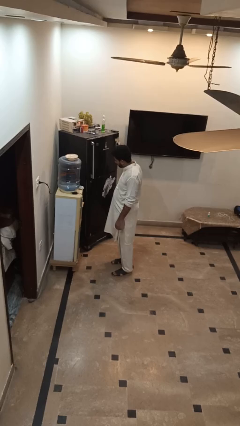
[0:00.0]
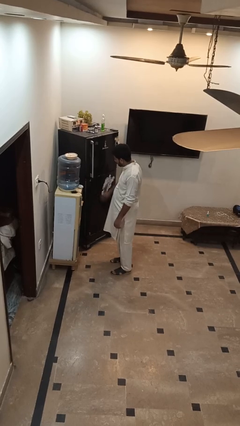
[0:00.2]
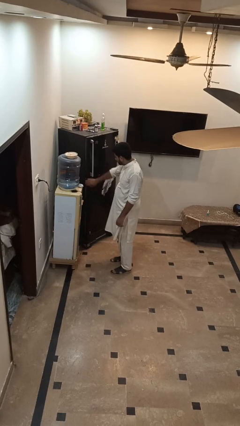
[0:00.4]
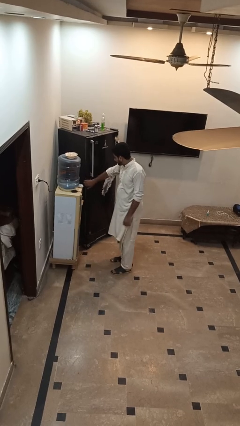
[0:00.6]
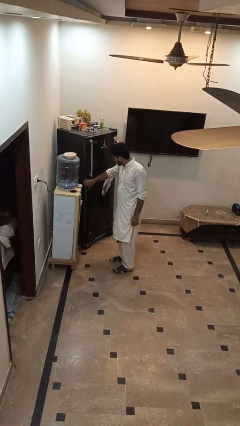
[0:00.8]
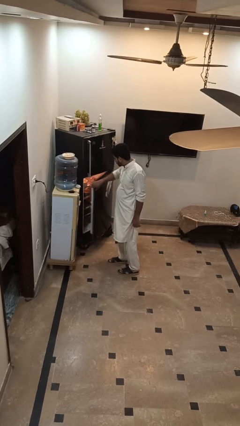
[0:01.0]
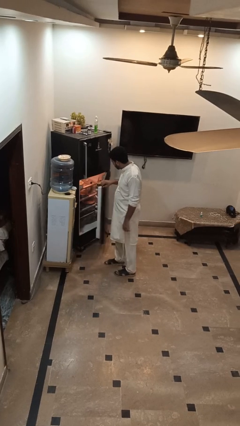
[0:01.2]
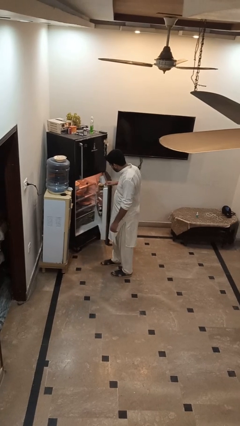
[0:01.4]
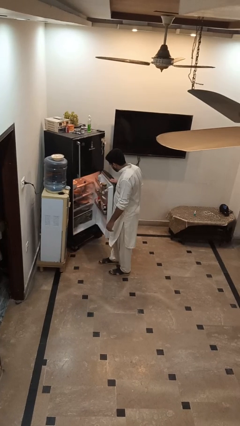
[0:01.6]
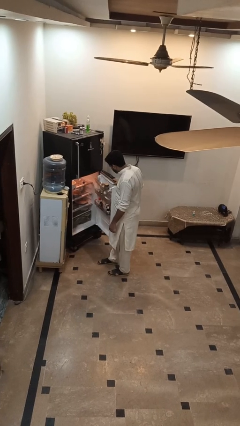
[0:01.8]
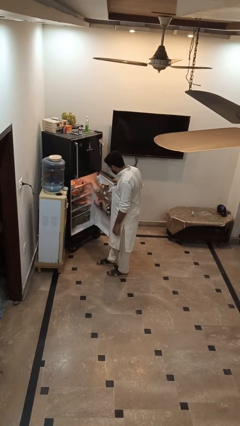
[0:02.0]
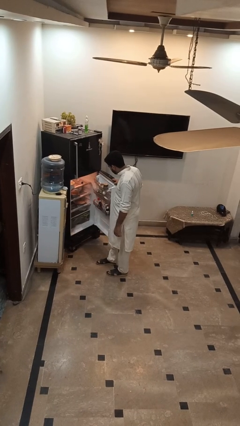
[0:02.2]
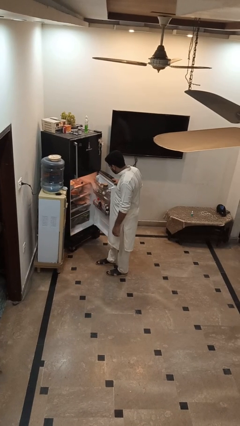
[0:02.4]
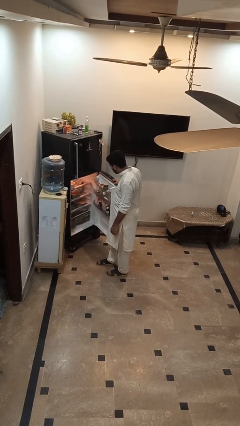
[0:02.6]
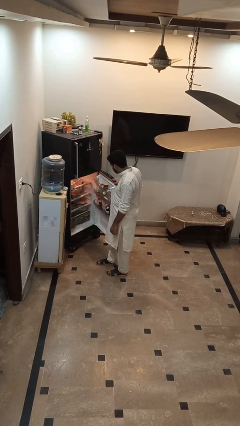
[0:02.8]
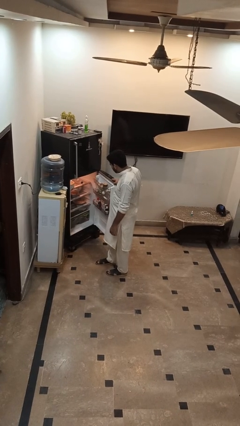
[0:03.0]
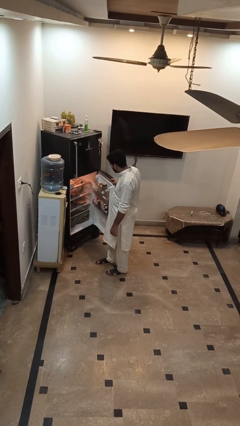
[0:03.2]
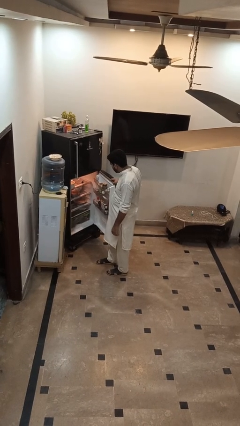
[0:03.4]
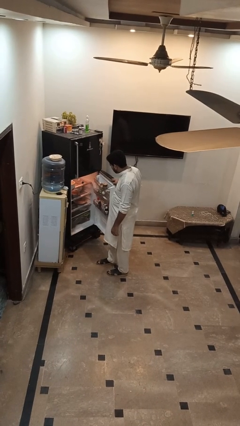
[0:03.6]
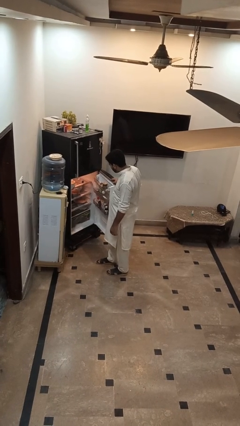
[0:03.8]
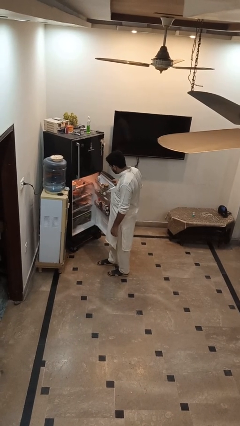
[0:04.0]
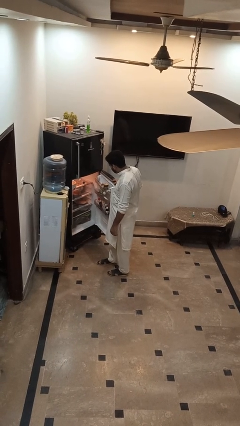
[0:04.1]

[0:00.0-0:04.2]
person opens refrigerator

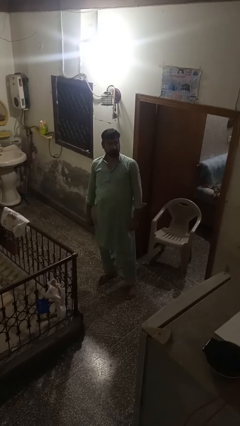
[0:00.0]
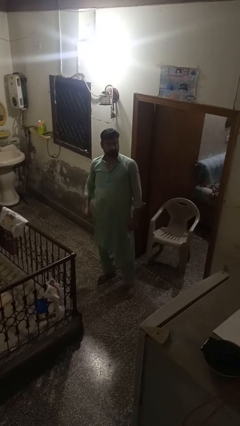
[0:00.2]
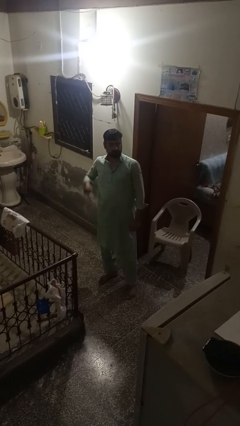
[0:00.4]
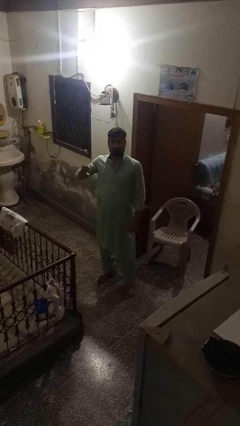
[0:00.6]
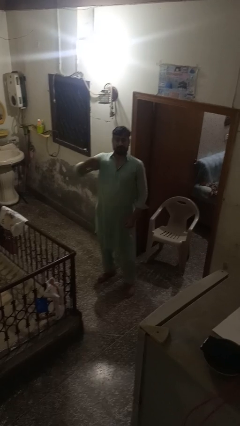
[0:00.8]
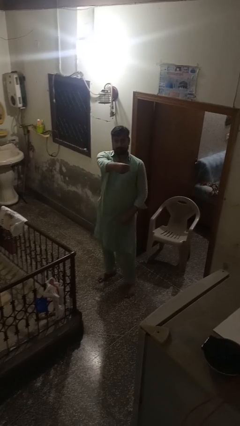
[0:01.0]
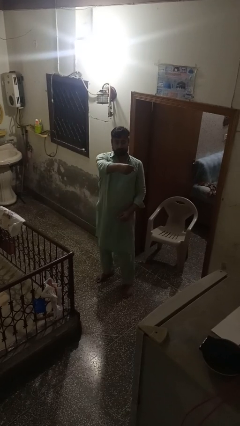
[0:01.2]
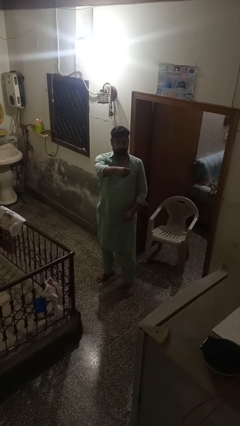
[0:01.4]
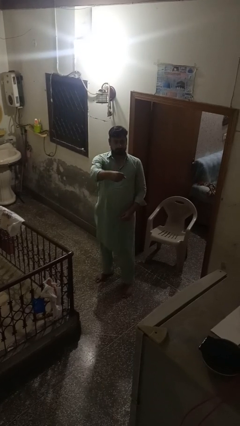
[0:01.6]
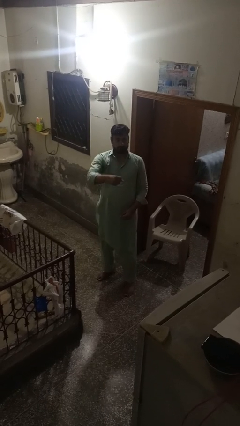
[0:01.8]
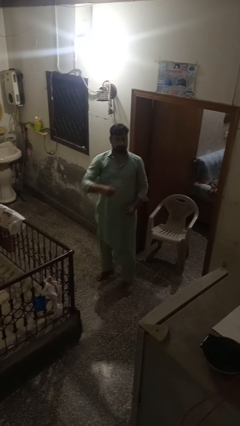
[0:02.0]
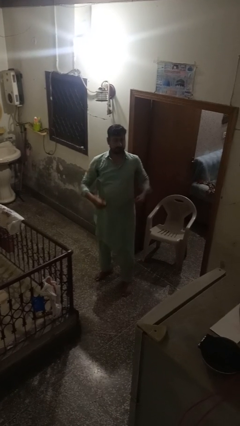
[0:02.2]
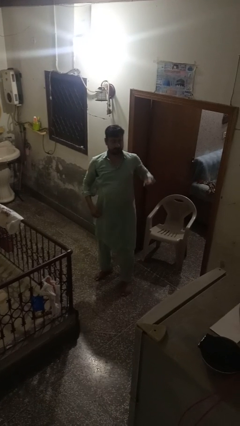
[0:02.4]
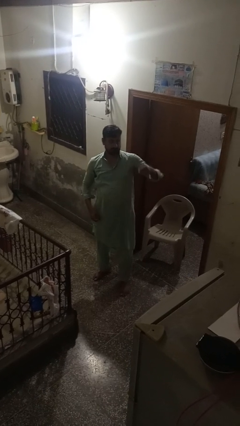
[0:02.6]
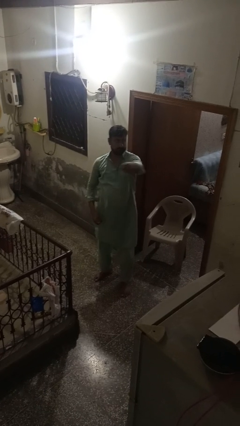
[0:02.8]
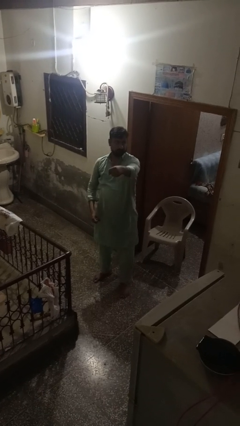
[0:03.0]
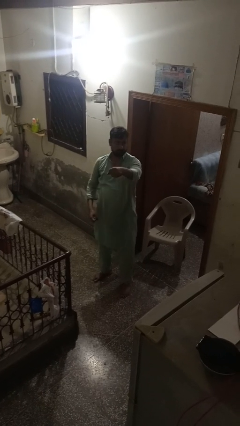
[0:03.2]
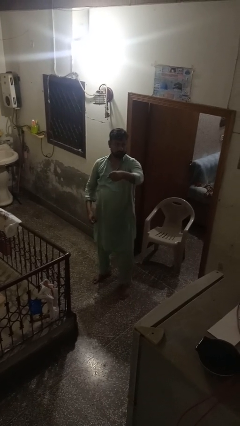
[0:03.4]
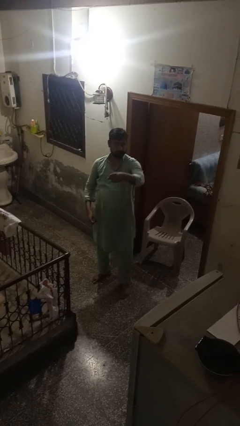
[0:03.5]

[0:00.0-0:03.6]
person punches

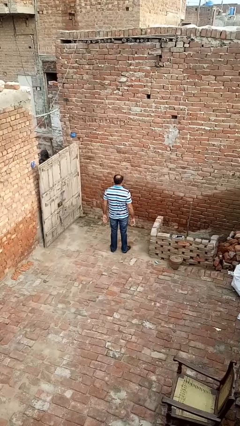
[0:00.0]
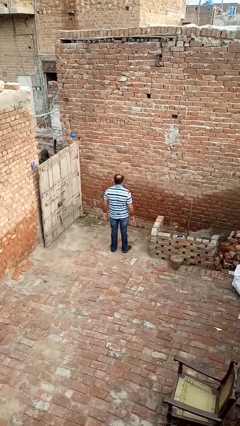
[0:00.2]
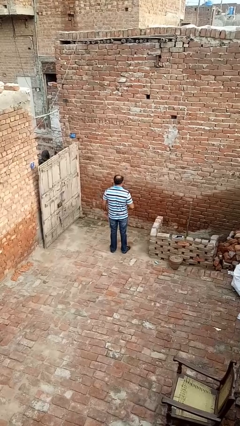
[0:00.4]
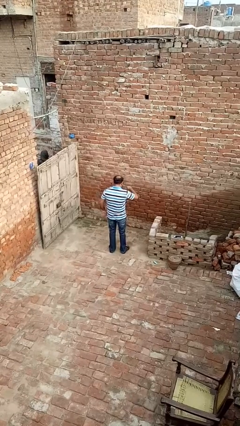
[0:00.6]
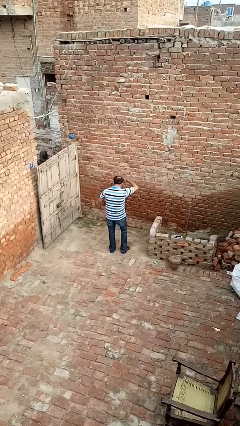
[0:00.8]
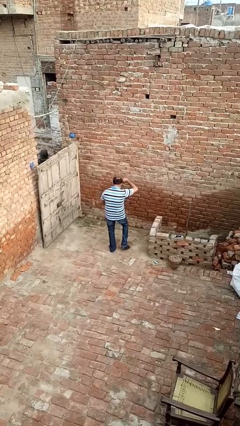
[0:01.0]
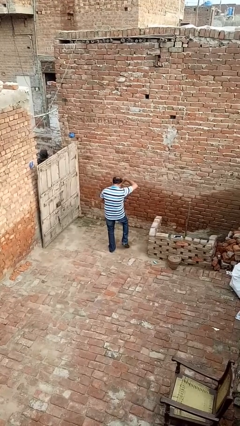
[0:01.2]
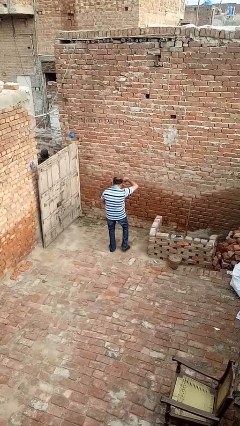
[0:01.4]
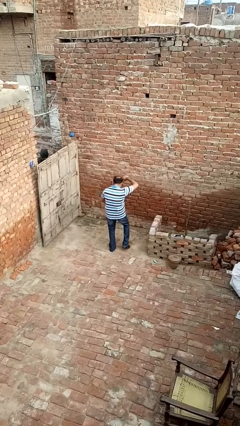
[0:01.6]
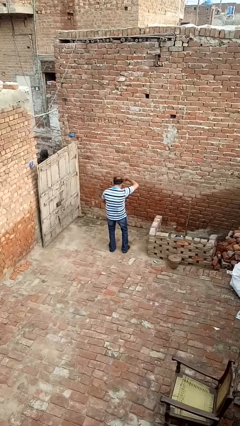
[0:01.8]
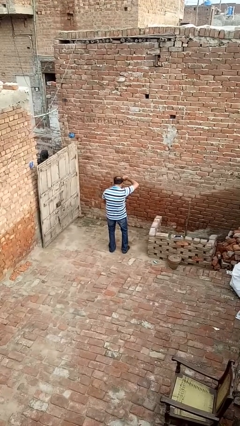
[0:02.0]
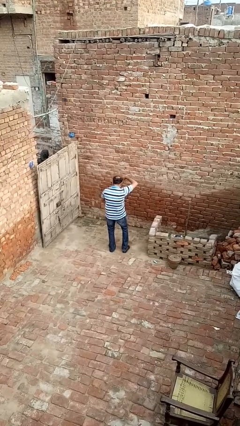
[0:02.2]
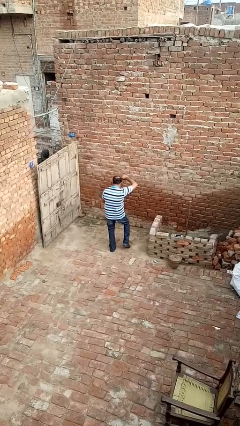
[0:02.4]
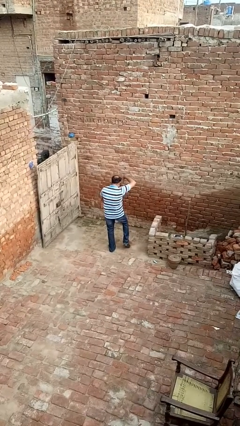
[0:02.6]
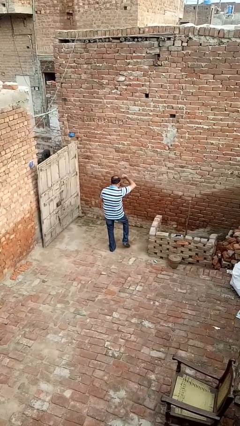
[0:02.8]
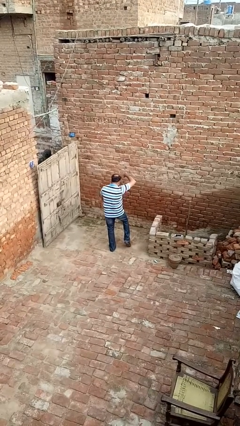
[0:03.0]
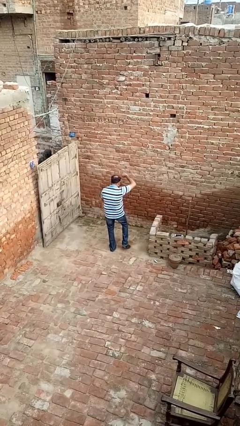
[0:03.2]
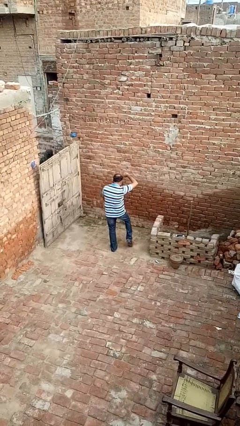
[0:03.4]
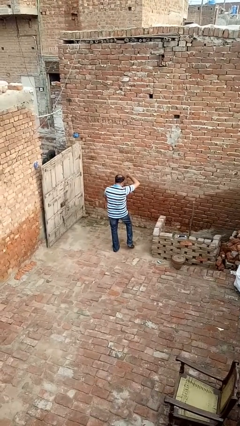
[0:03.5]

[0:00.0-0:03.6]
person dances in place

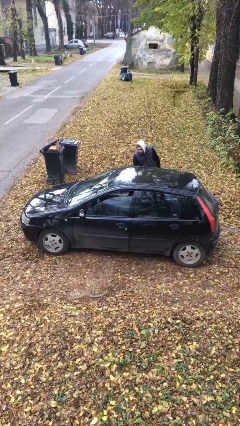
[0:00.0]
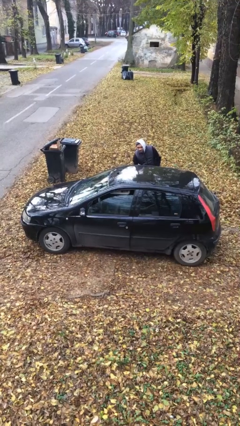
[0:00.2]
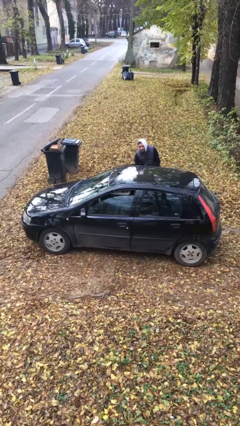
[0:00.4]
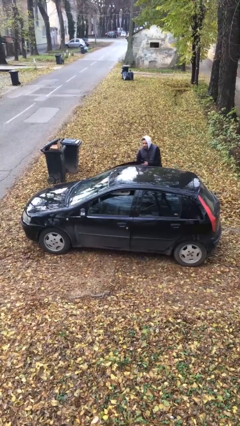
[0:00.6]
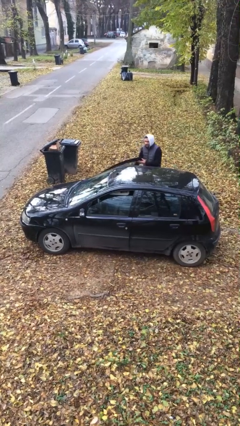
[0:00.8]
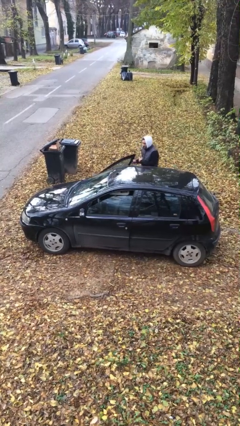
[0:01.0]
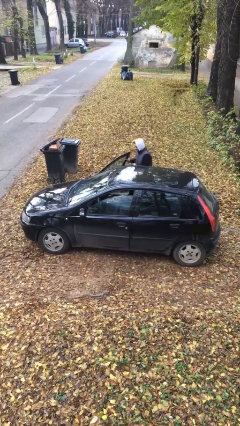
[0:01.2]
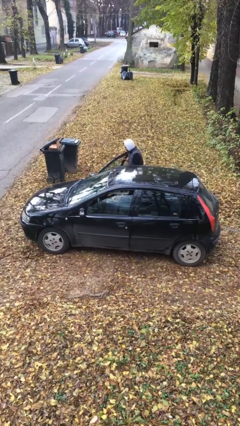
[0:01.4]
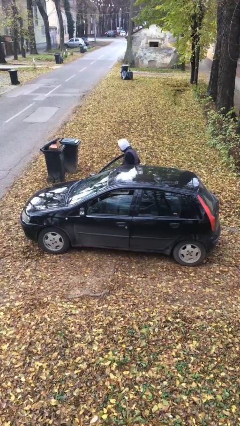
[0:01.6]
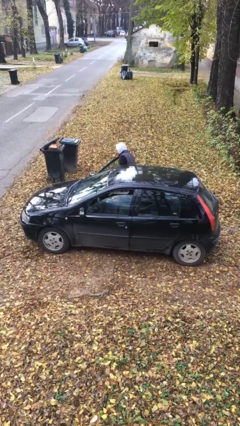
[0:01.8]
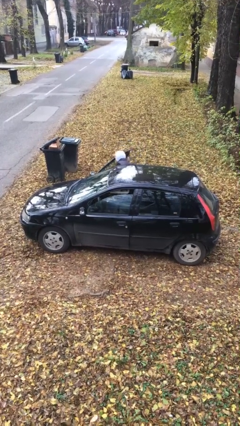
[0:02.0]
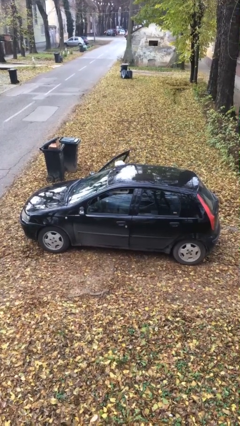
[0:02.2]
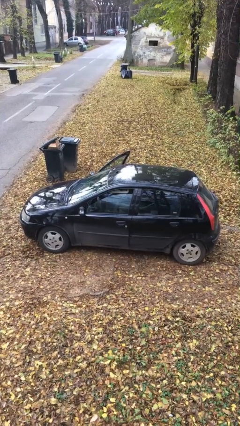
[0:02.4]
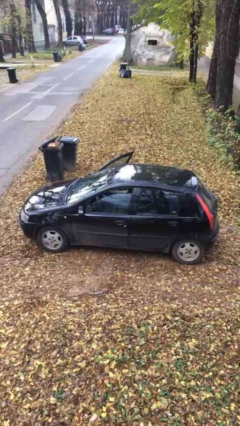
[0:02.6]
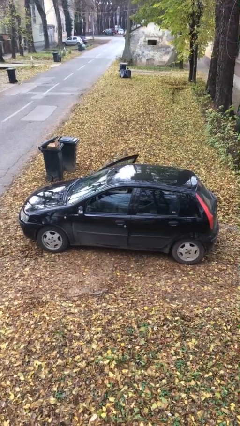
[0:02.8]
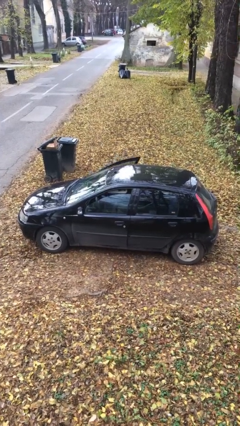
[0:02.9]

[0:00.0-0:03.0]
car picks up person

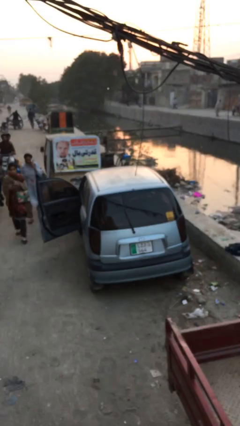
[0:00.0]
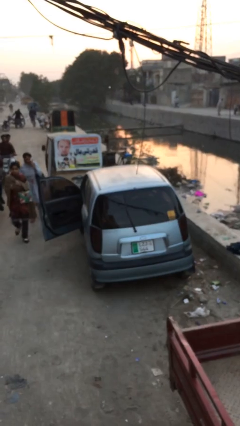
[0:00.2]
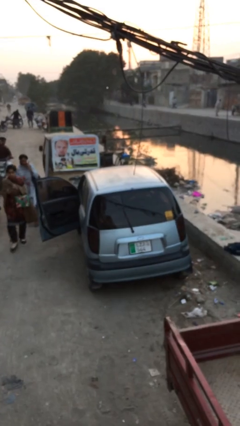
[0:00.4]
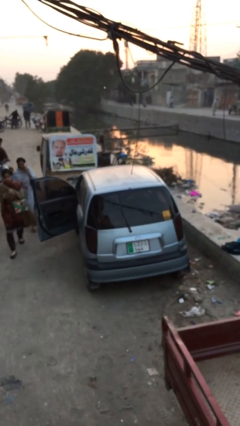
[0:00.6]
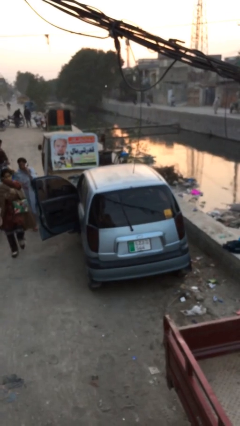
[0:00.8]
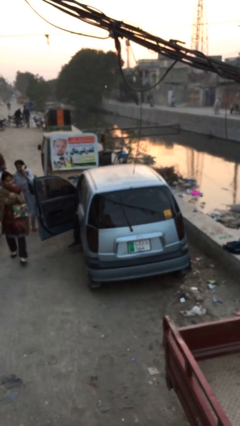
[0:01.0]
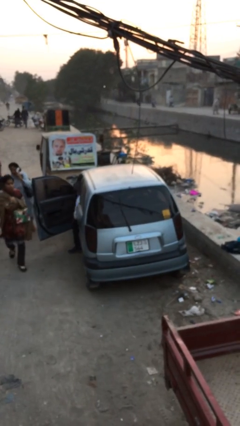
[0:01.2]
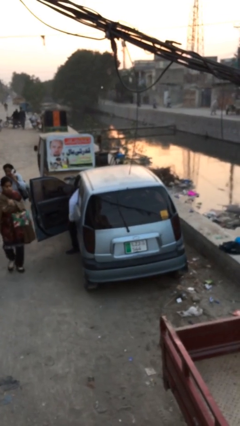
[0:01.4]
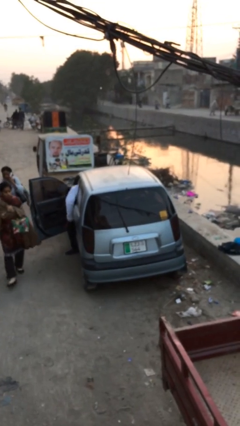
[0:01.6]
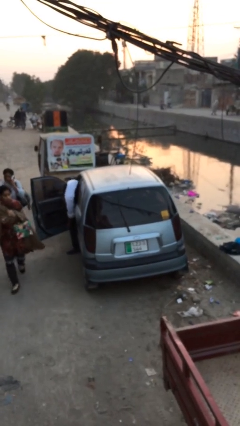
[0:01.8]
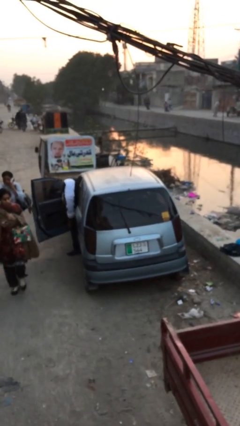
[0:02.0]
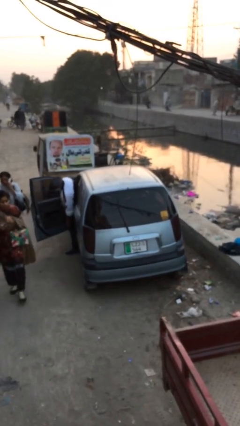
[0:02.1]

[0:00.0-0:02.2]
person exits car

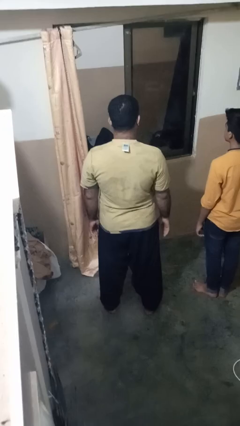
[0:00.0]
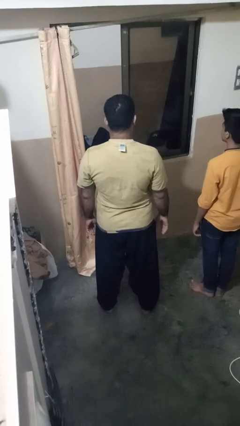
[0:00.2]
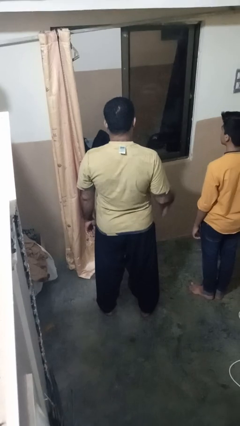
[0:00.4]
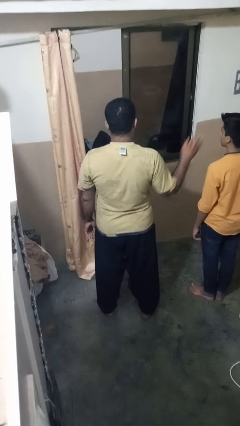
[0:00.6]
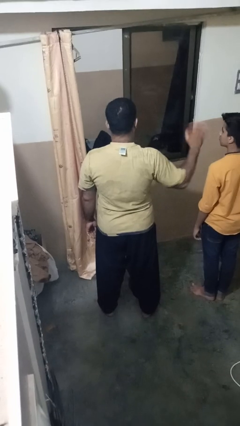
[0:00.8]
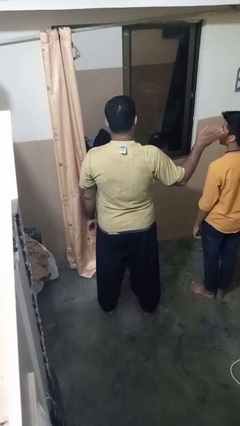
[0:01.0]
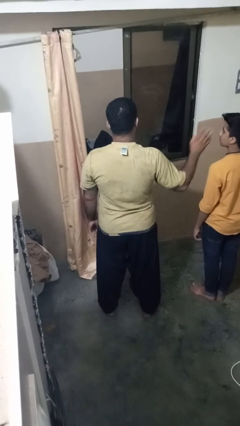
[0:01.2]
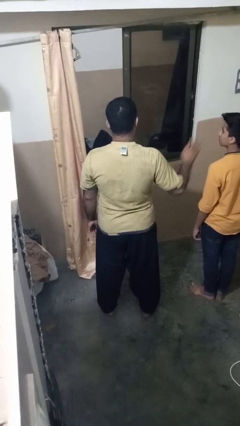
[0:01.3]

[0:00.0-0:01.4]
person waves at person
